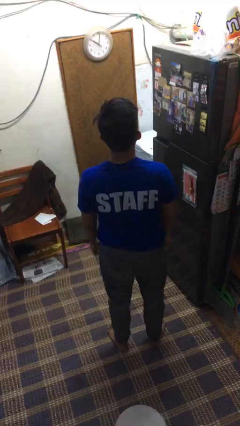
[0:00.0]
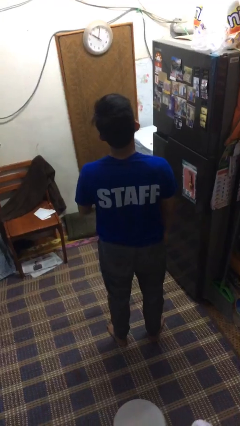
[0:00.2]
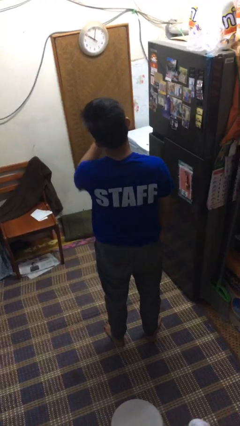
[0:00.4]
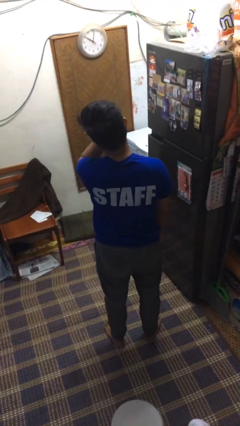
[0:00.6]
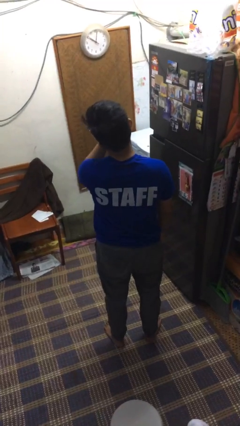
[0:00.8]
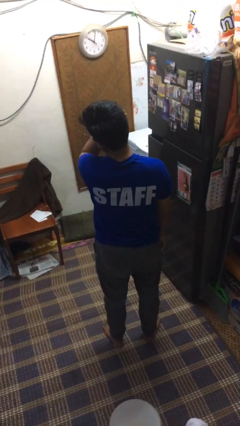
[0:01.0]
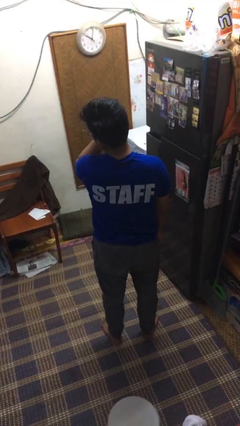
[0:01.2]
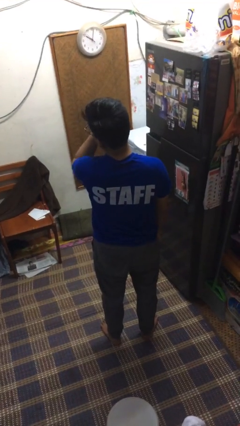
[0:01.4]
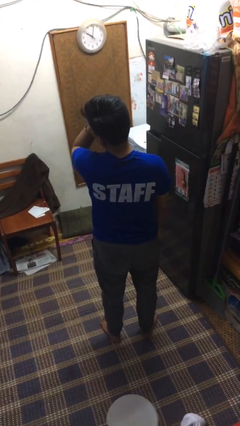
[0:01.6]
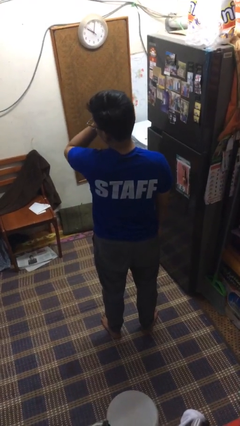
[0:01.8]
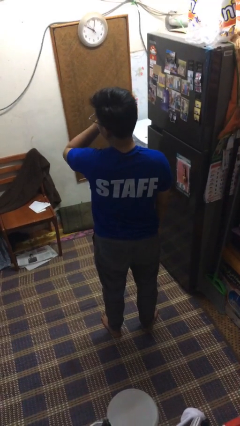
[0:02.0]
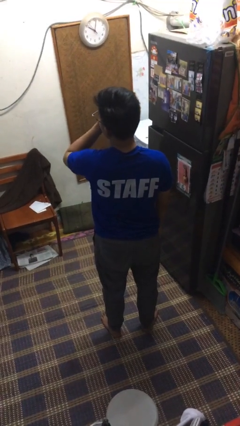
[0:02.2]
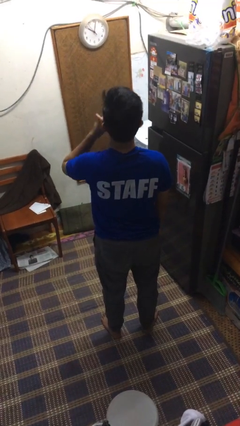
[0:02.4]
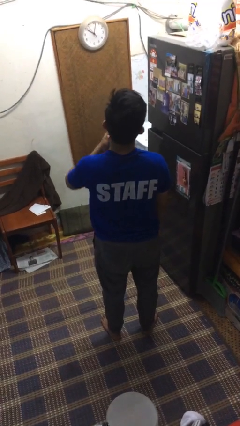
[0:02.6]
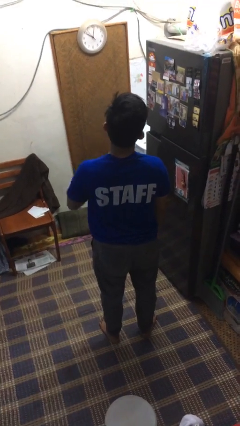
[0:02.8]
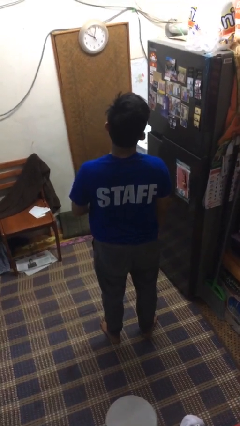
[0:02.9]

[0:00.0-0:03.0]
person scratches face

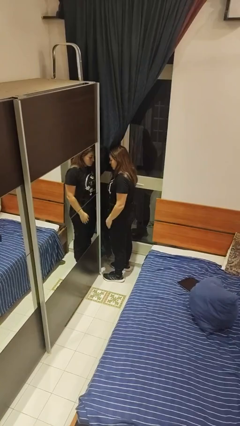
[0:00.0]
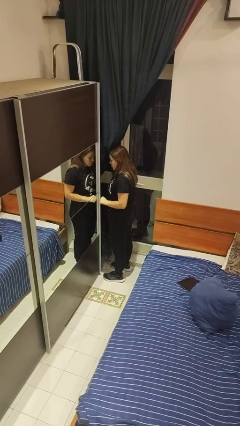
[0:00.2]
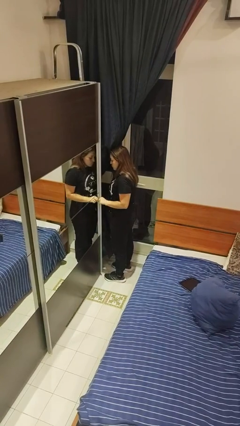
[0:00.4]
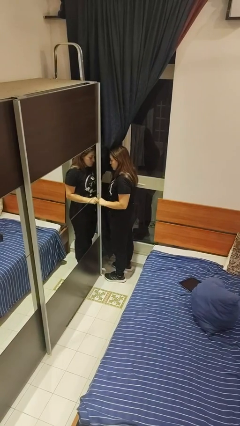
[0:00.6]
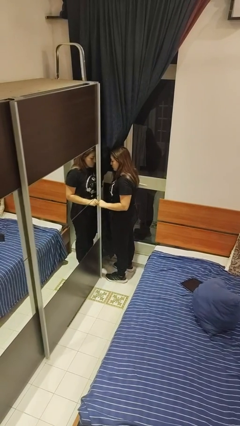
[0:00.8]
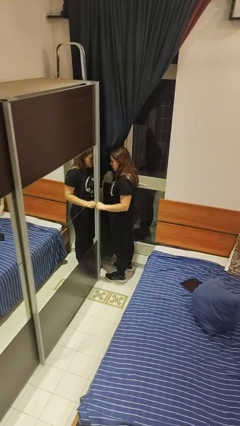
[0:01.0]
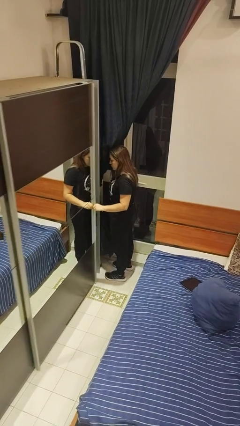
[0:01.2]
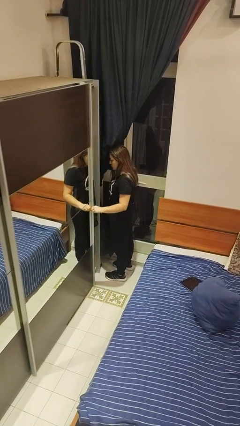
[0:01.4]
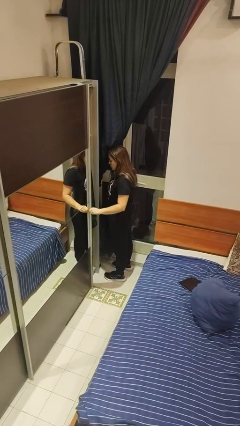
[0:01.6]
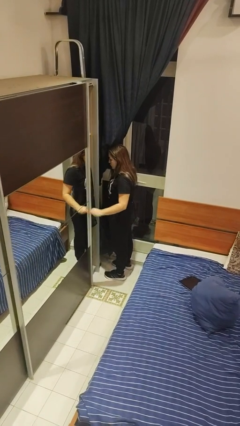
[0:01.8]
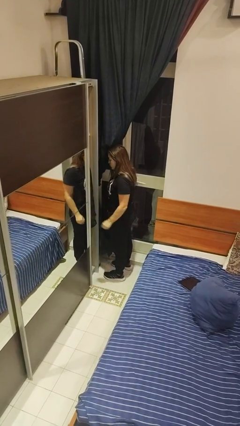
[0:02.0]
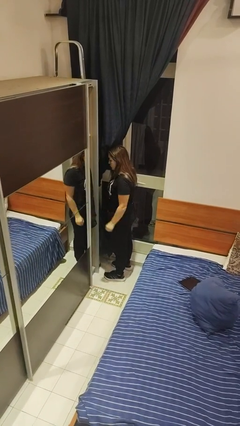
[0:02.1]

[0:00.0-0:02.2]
person opens closet door

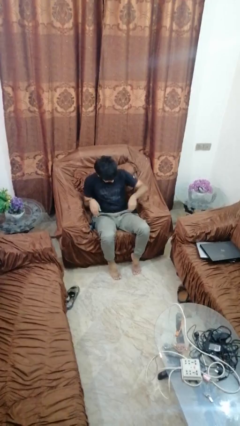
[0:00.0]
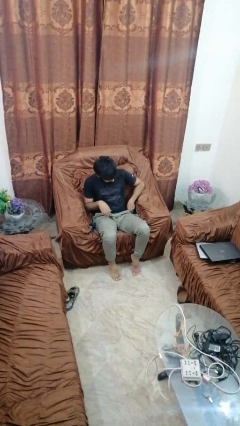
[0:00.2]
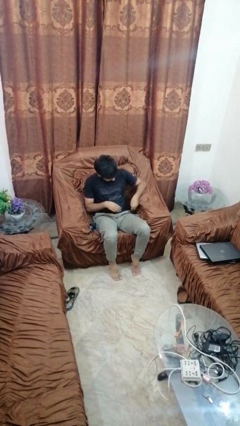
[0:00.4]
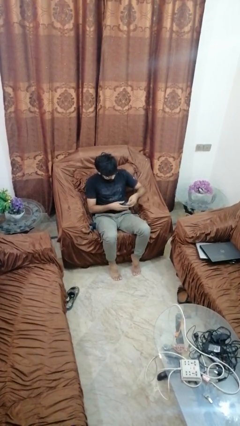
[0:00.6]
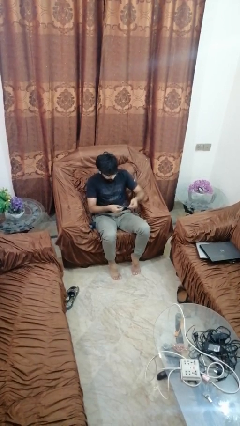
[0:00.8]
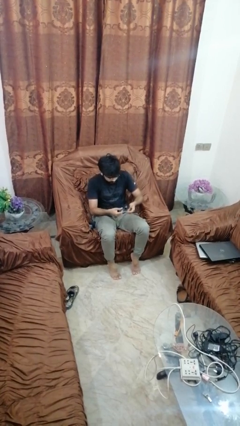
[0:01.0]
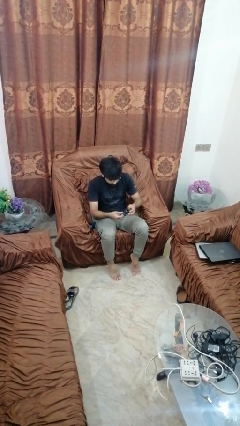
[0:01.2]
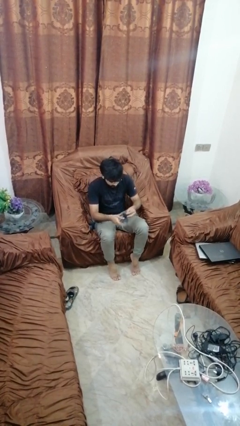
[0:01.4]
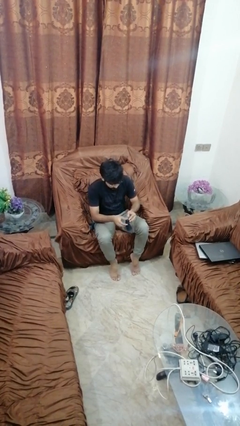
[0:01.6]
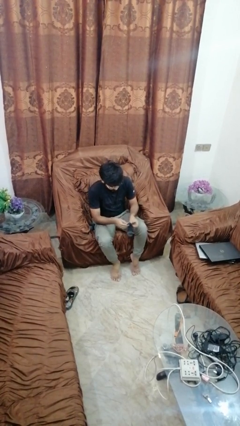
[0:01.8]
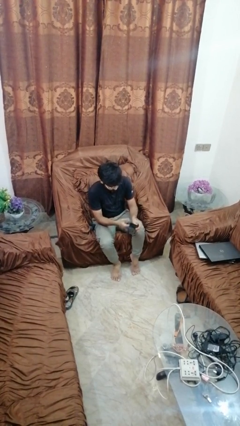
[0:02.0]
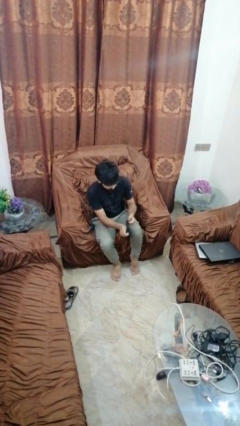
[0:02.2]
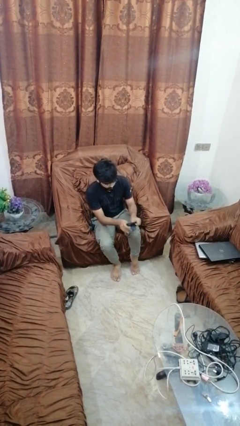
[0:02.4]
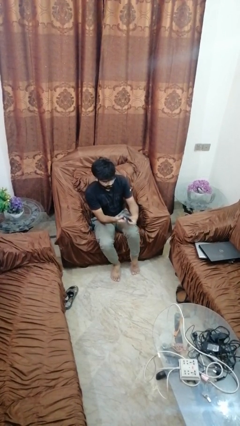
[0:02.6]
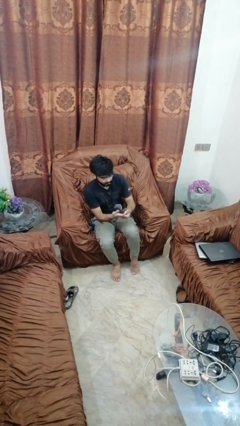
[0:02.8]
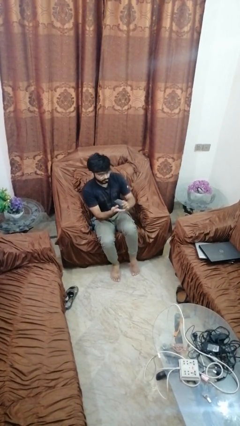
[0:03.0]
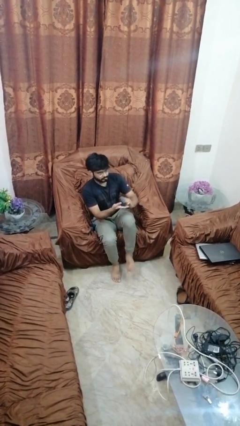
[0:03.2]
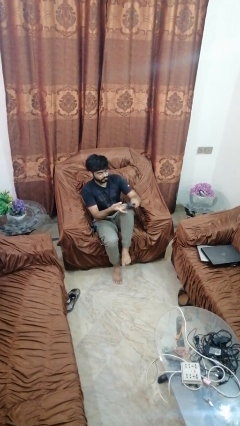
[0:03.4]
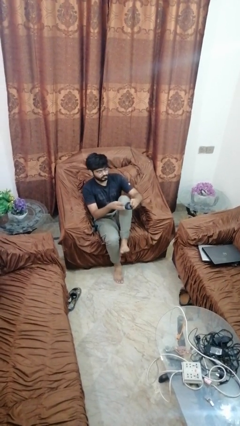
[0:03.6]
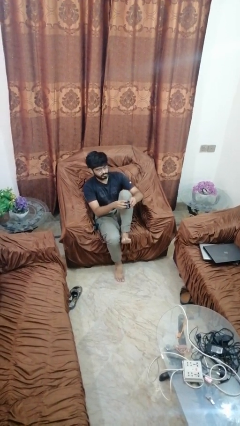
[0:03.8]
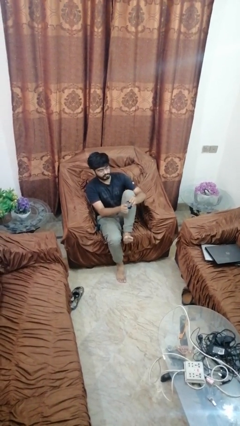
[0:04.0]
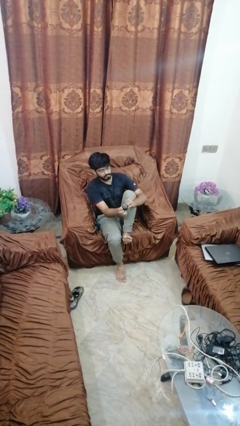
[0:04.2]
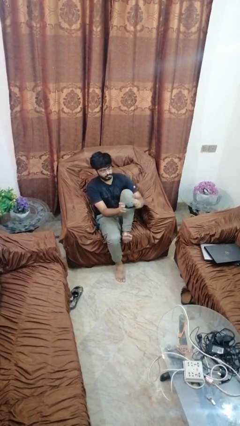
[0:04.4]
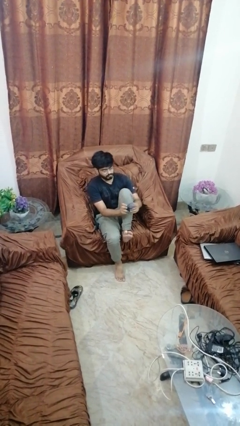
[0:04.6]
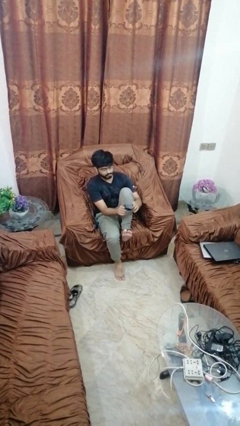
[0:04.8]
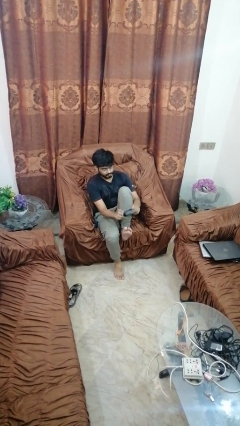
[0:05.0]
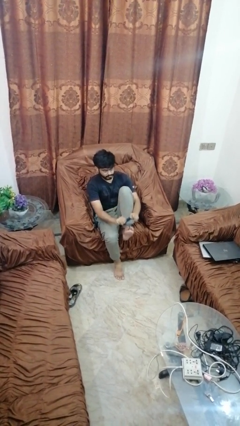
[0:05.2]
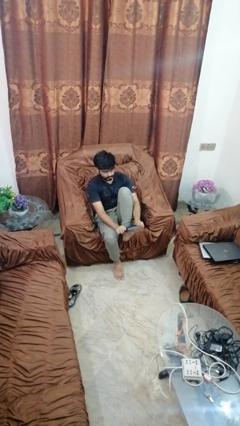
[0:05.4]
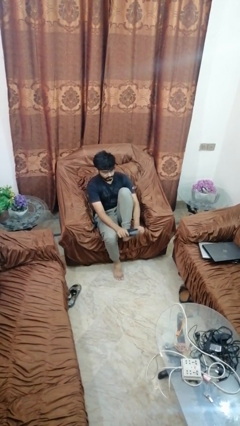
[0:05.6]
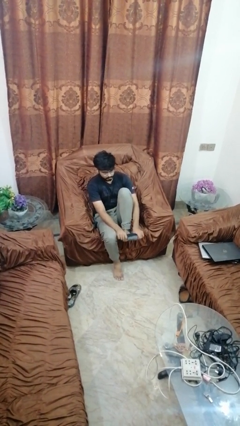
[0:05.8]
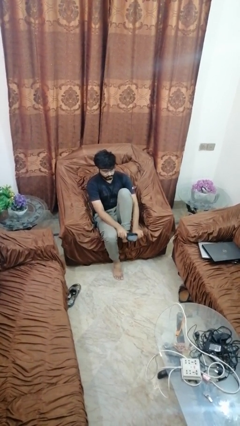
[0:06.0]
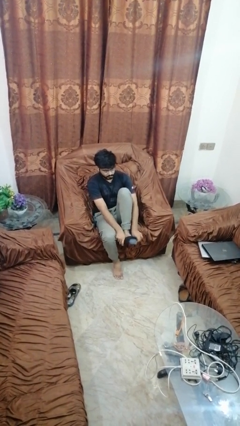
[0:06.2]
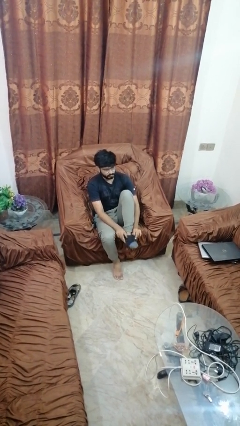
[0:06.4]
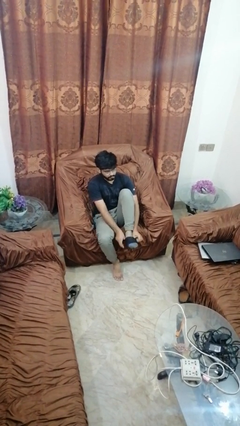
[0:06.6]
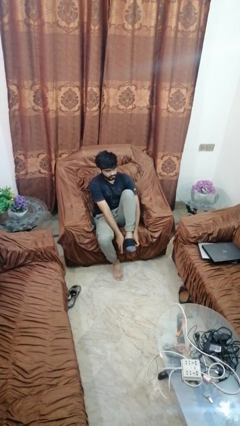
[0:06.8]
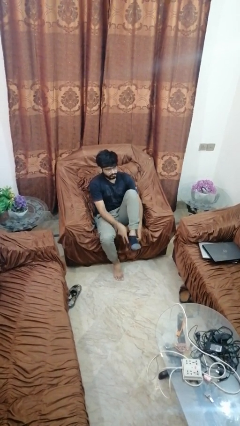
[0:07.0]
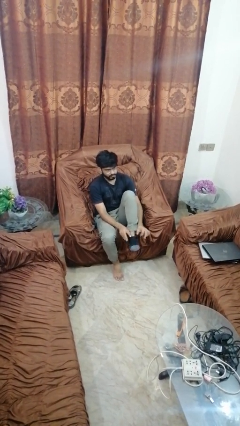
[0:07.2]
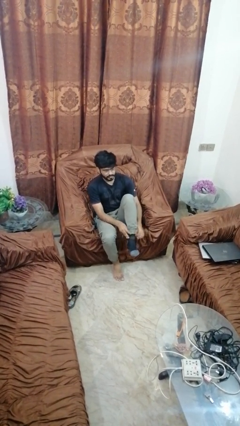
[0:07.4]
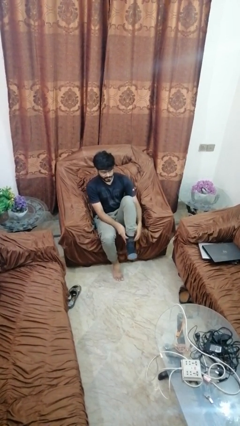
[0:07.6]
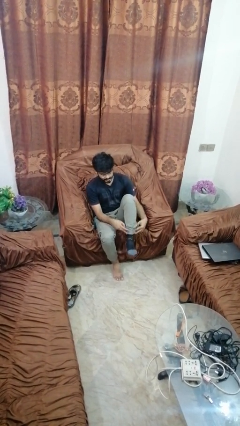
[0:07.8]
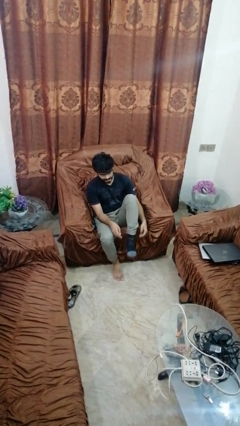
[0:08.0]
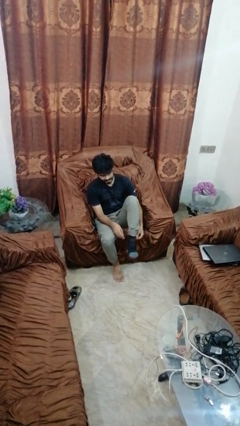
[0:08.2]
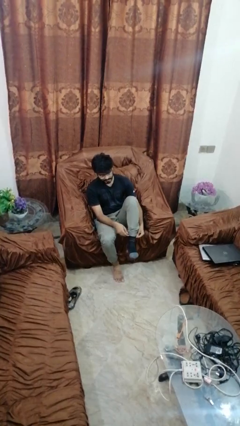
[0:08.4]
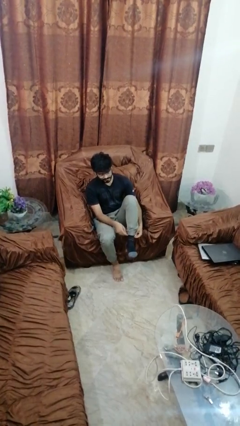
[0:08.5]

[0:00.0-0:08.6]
person puts on socks

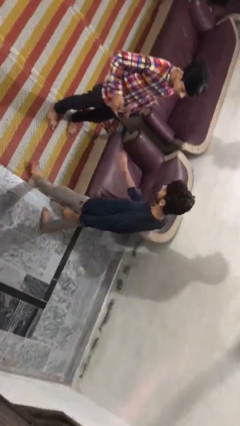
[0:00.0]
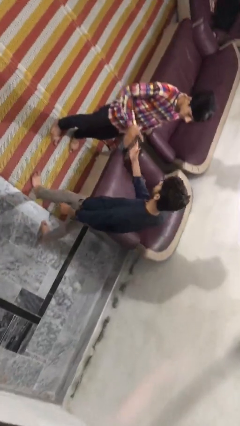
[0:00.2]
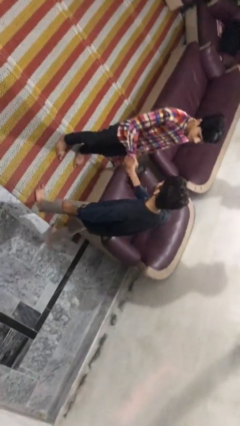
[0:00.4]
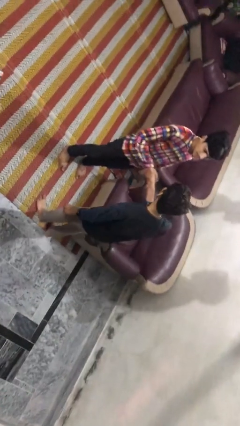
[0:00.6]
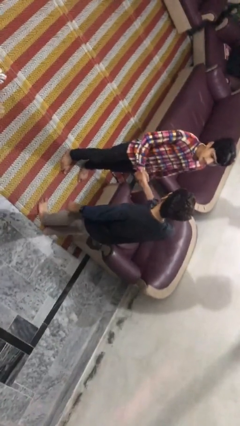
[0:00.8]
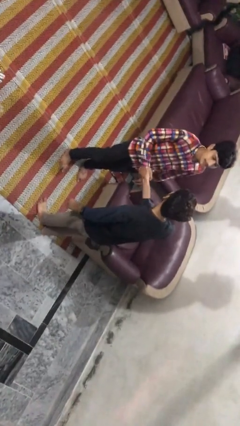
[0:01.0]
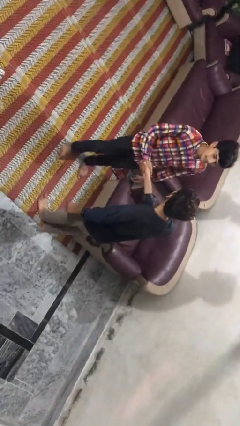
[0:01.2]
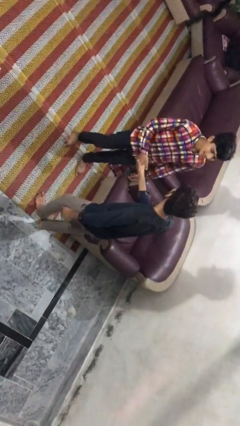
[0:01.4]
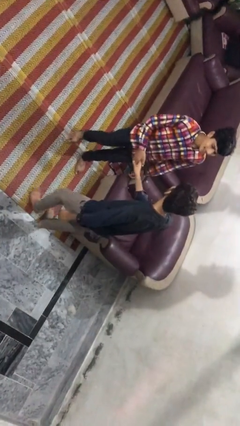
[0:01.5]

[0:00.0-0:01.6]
person shakes hand

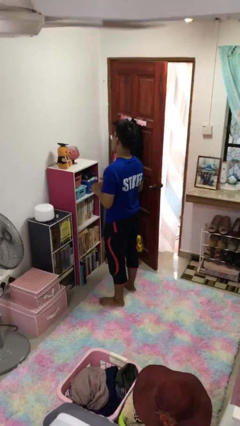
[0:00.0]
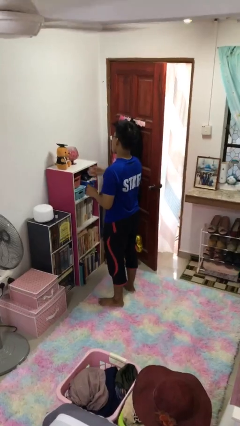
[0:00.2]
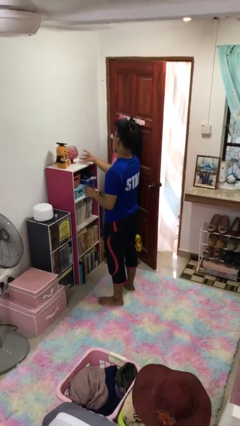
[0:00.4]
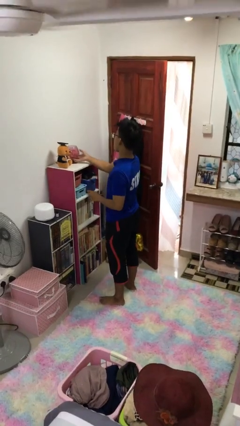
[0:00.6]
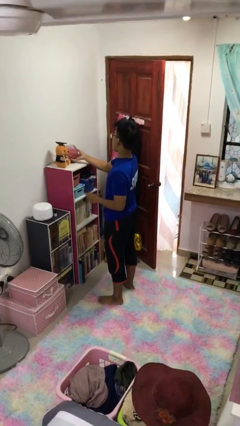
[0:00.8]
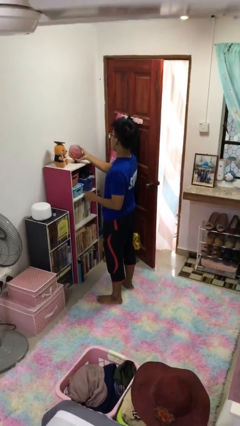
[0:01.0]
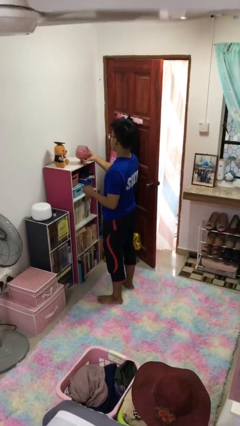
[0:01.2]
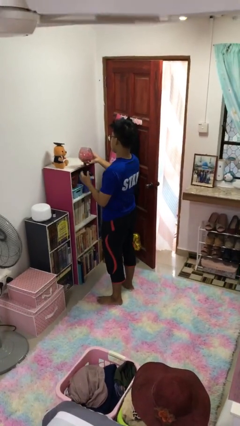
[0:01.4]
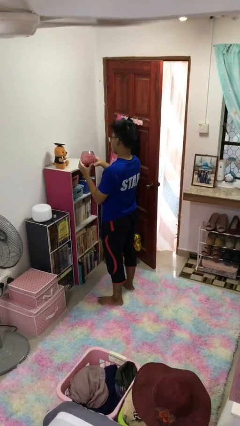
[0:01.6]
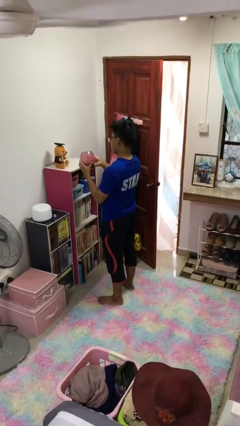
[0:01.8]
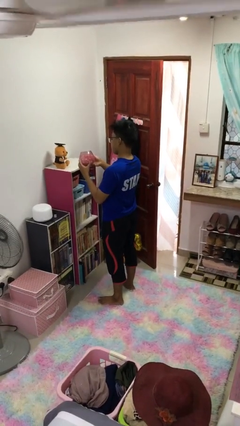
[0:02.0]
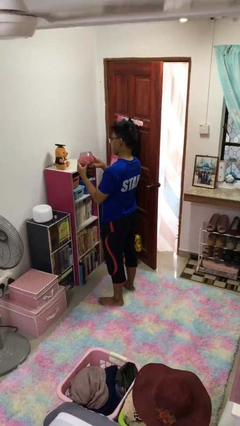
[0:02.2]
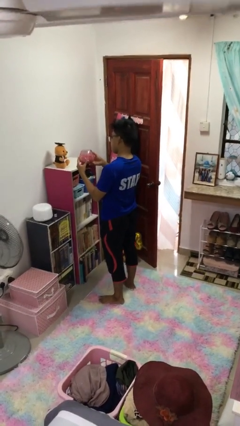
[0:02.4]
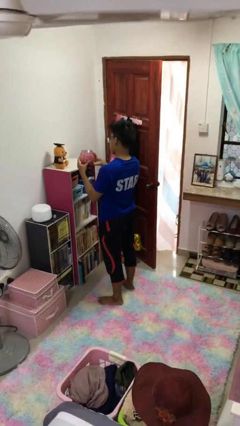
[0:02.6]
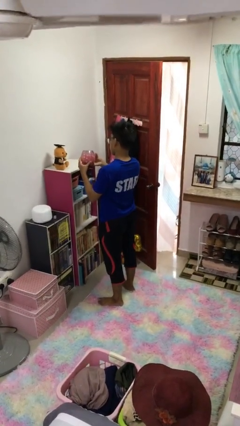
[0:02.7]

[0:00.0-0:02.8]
person picks up object from shelf
